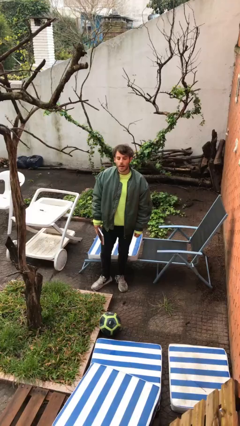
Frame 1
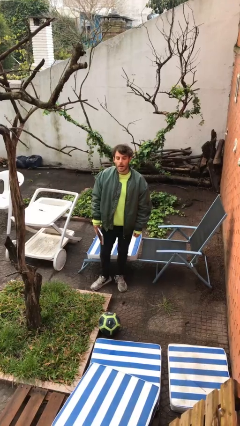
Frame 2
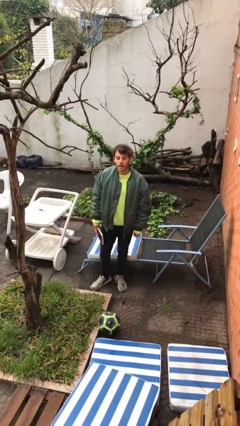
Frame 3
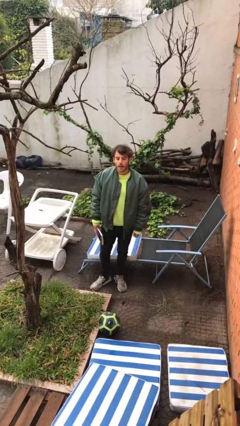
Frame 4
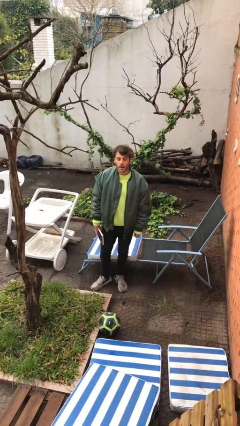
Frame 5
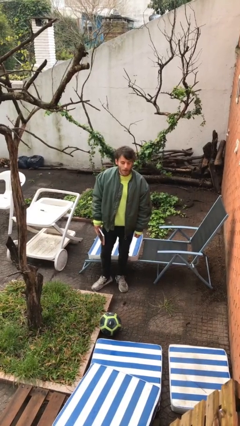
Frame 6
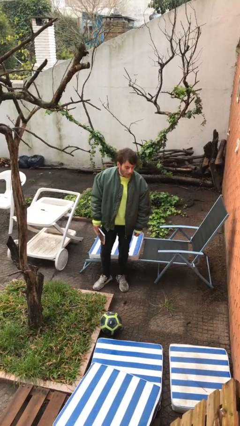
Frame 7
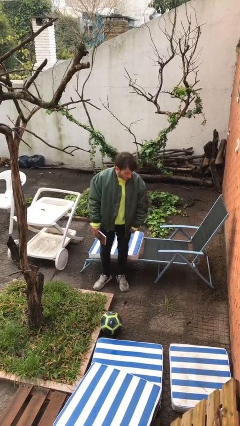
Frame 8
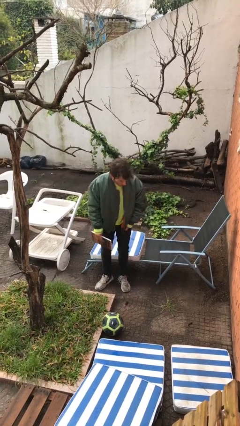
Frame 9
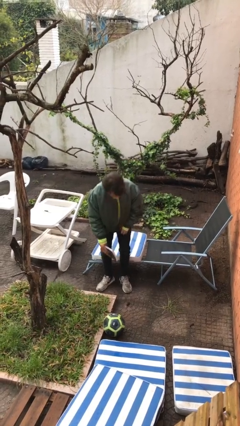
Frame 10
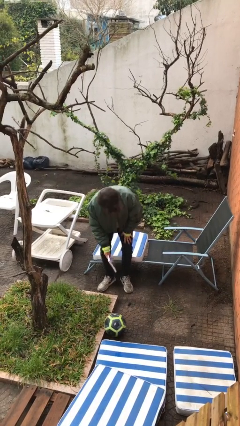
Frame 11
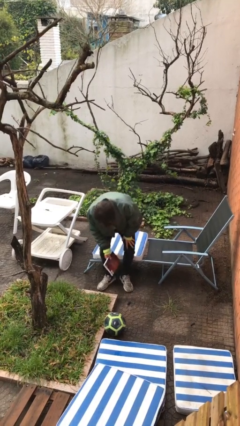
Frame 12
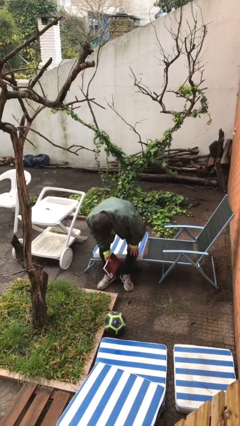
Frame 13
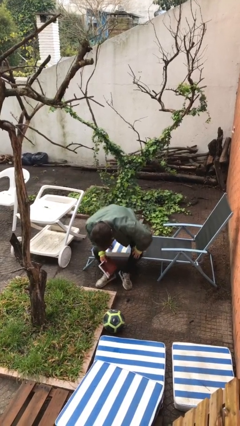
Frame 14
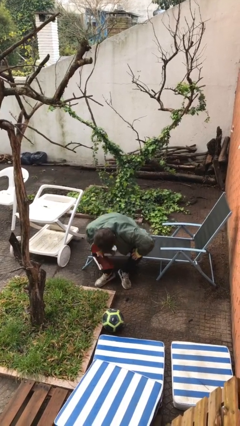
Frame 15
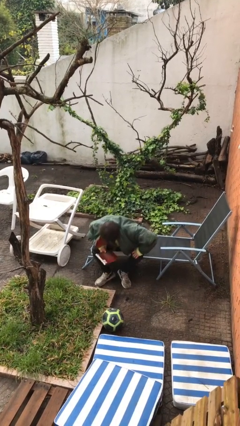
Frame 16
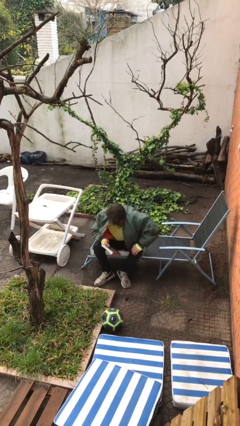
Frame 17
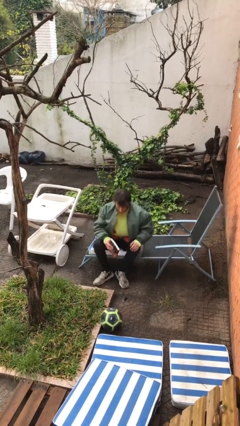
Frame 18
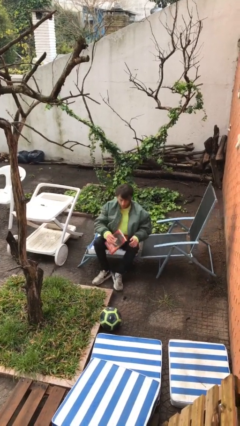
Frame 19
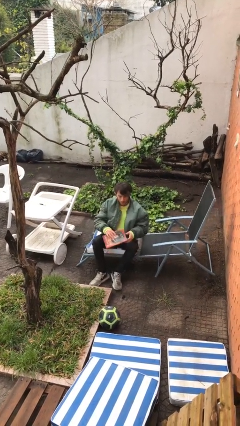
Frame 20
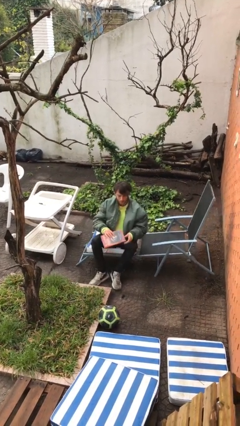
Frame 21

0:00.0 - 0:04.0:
person sits down

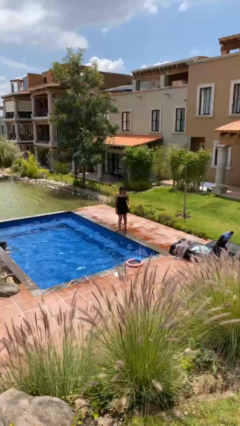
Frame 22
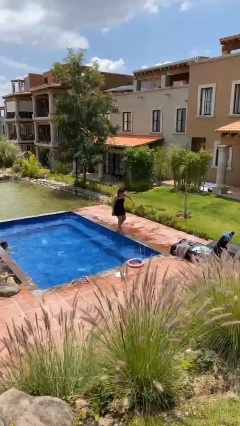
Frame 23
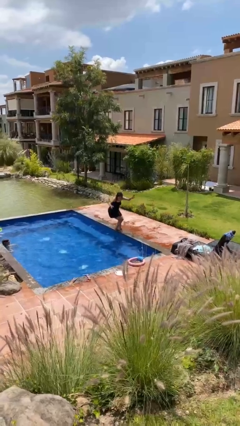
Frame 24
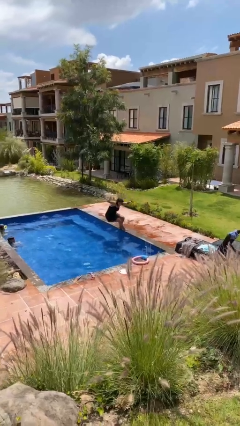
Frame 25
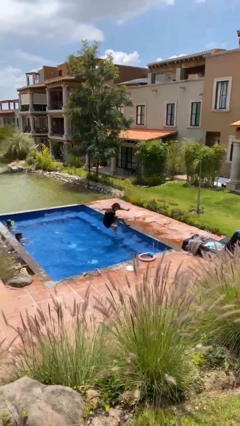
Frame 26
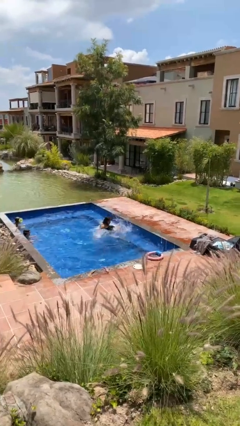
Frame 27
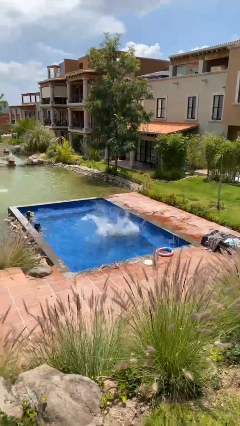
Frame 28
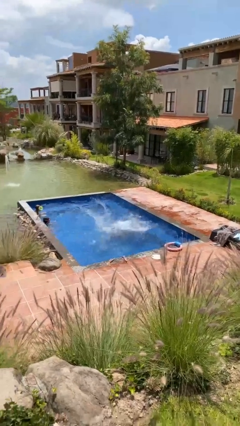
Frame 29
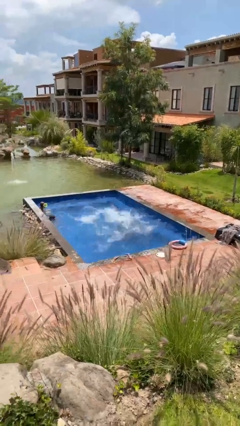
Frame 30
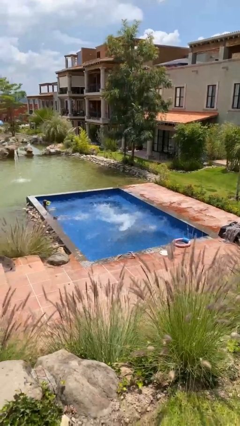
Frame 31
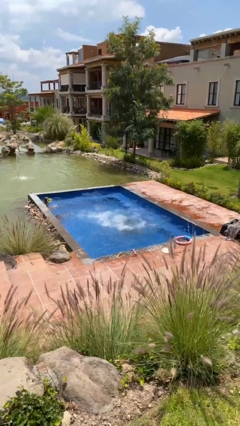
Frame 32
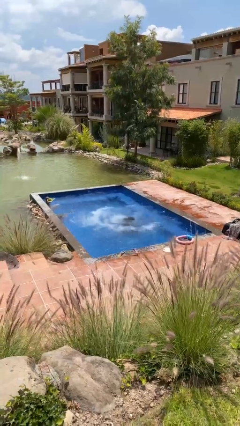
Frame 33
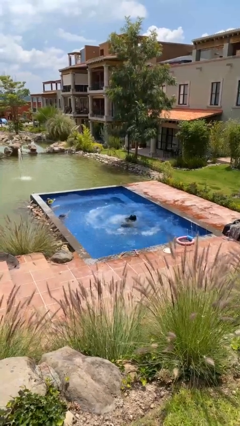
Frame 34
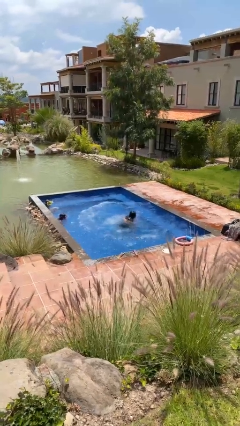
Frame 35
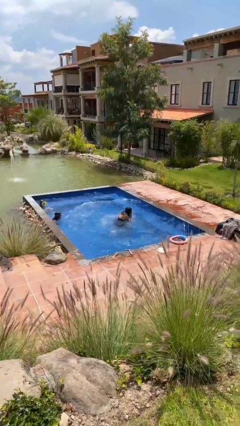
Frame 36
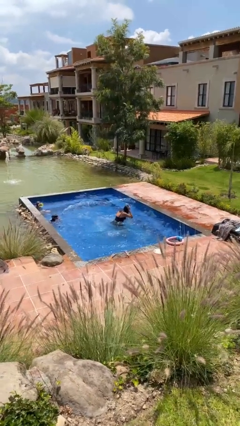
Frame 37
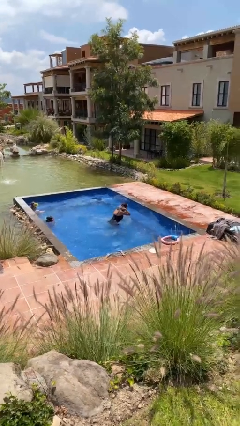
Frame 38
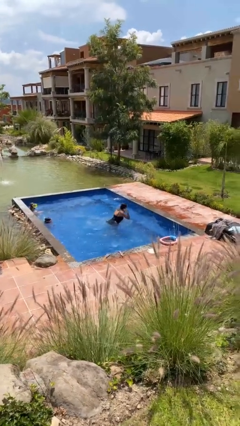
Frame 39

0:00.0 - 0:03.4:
person falls into pool

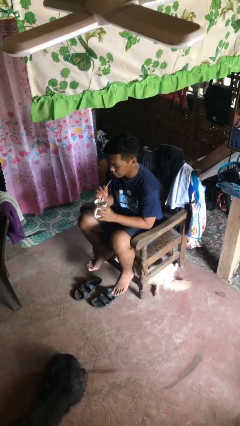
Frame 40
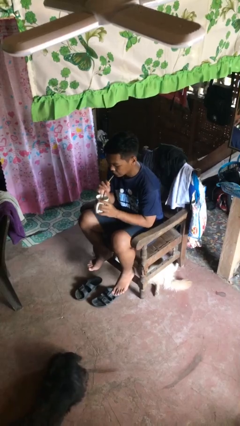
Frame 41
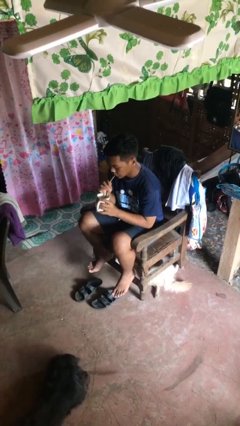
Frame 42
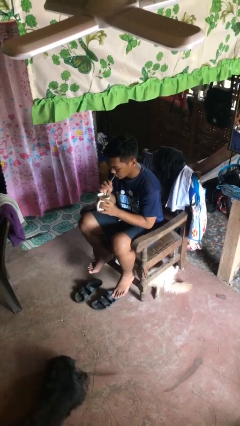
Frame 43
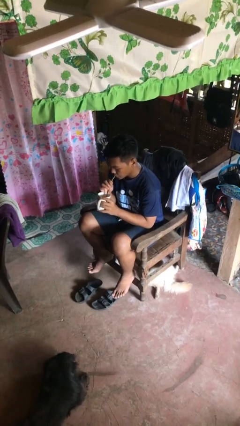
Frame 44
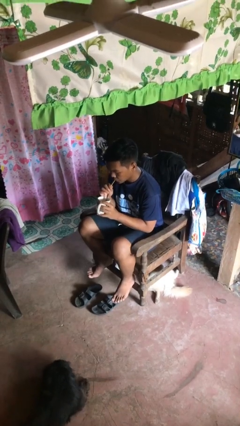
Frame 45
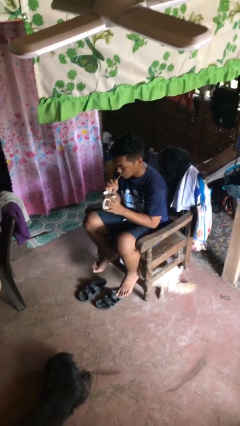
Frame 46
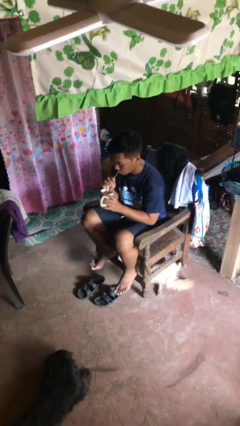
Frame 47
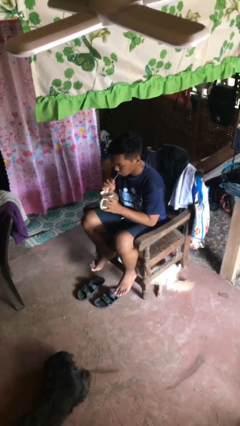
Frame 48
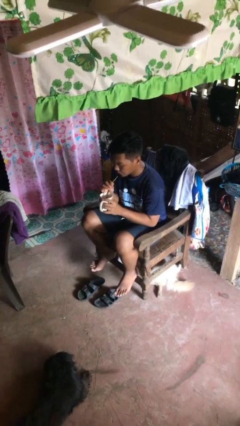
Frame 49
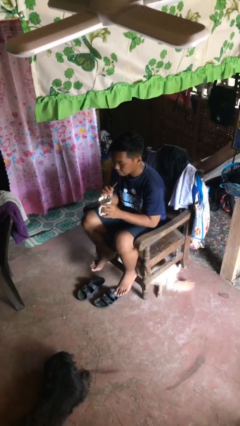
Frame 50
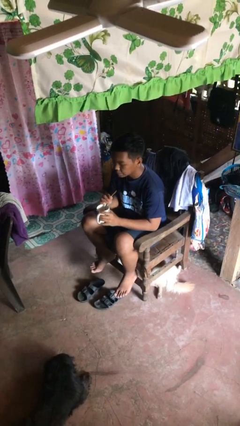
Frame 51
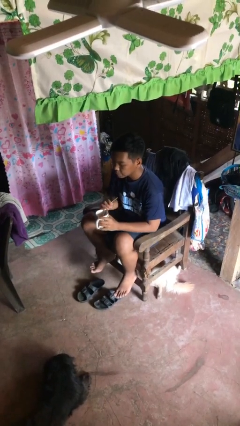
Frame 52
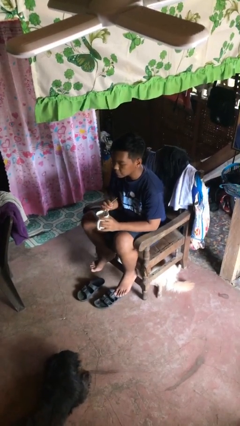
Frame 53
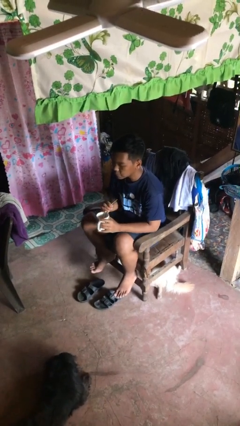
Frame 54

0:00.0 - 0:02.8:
person drinks from straw

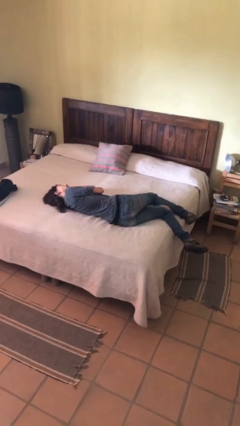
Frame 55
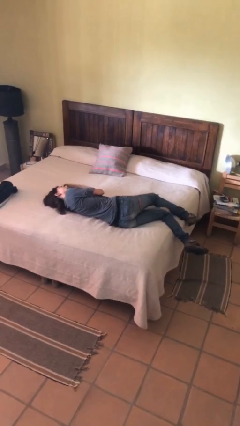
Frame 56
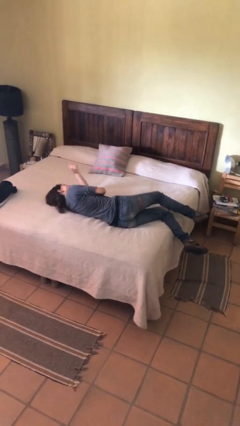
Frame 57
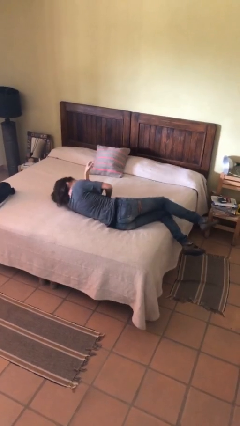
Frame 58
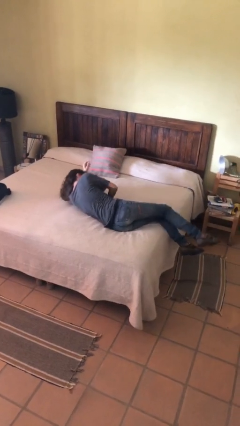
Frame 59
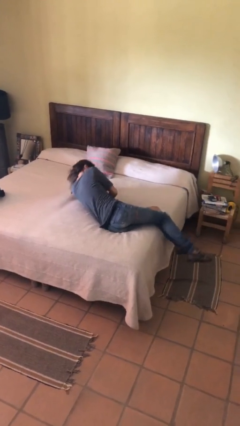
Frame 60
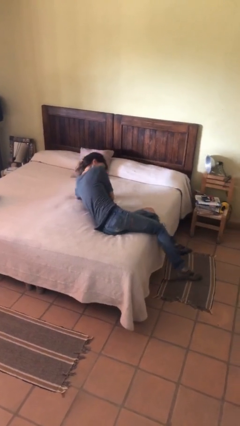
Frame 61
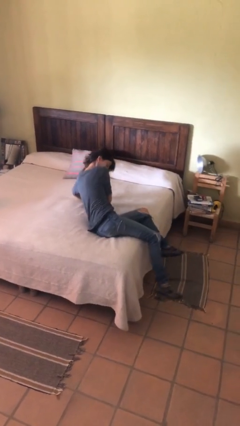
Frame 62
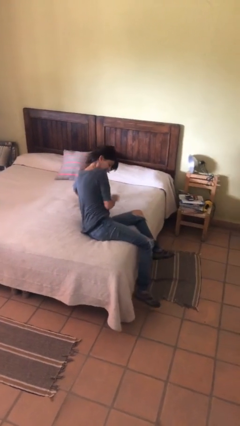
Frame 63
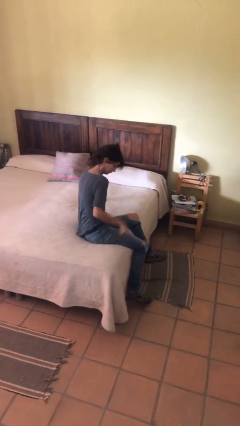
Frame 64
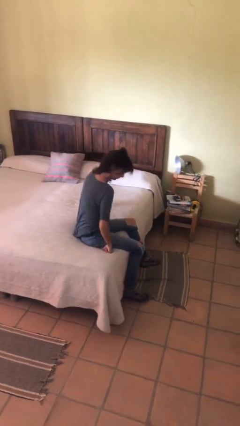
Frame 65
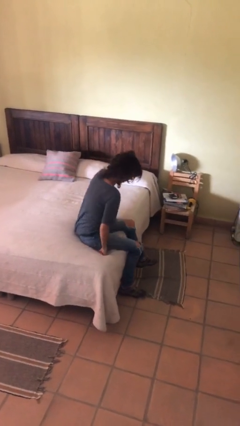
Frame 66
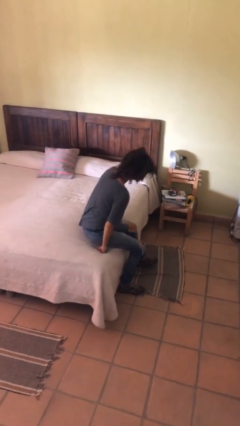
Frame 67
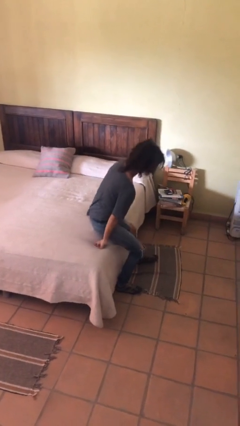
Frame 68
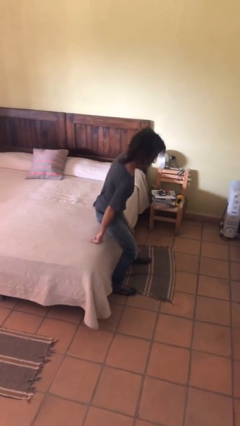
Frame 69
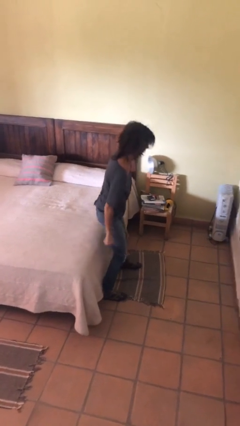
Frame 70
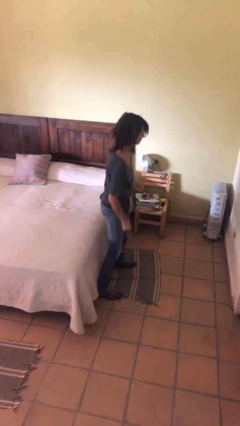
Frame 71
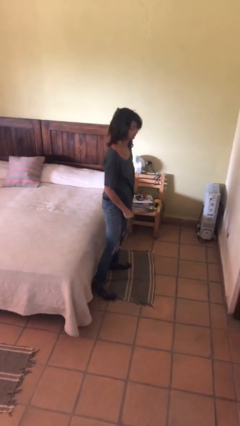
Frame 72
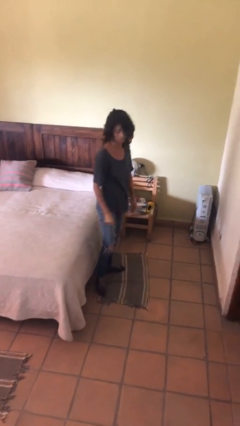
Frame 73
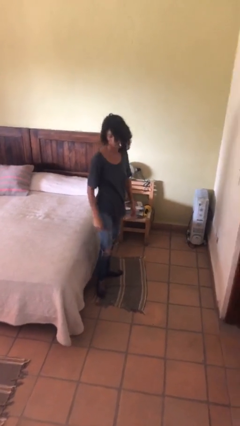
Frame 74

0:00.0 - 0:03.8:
person stands up

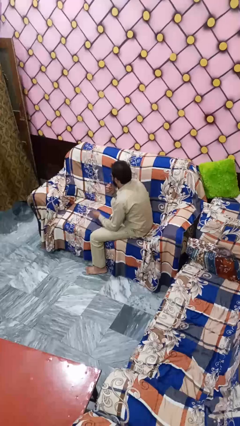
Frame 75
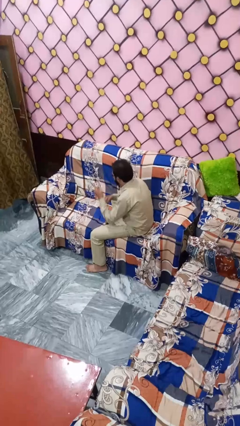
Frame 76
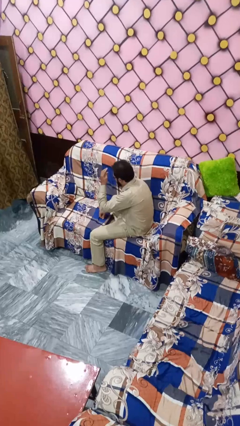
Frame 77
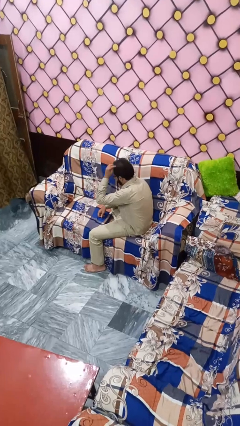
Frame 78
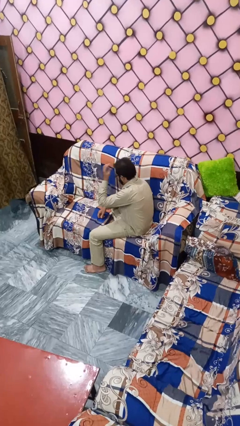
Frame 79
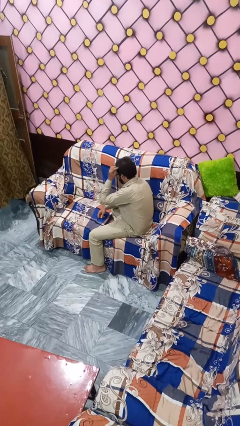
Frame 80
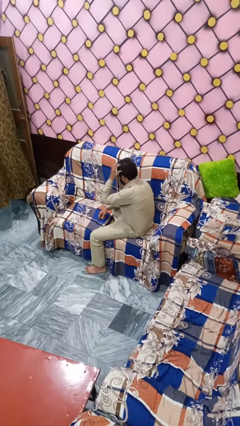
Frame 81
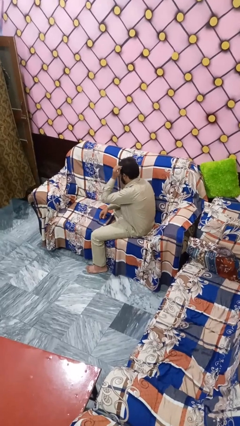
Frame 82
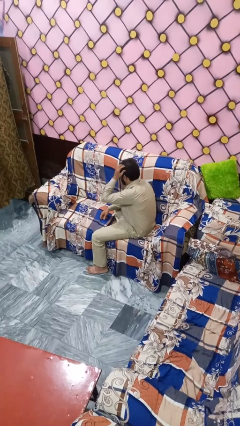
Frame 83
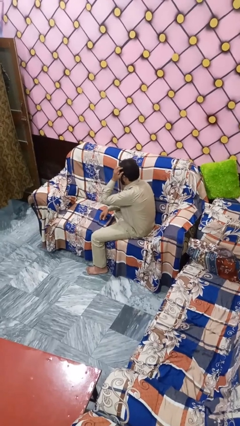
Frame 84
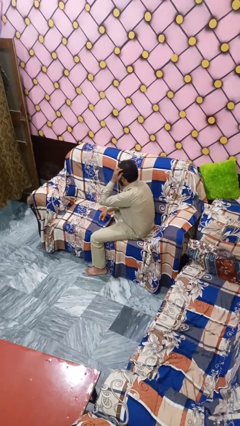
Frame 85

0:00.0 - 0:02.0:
person strokes hair

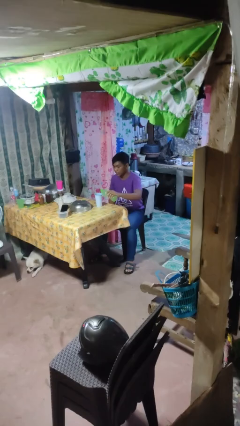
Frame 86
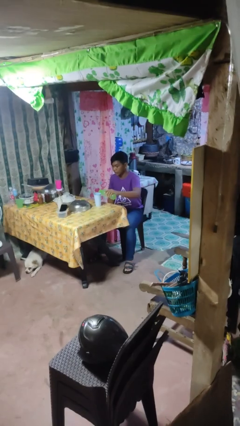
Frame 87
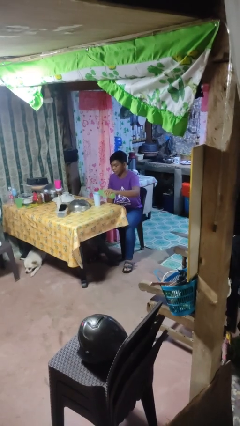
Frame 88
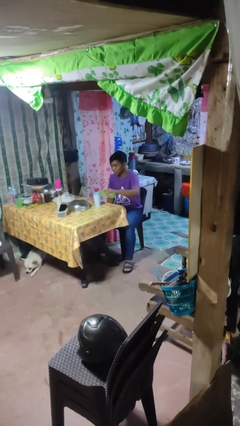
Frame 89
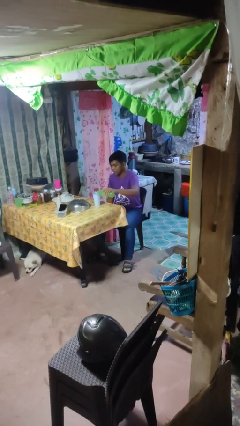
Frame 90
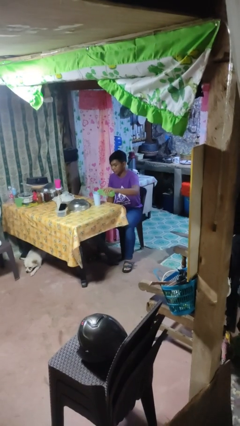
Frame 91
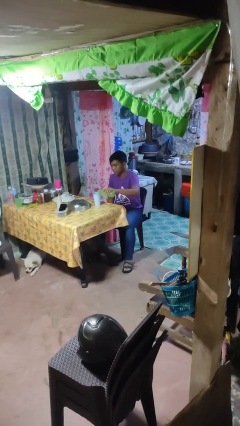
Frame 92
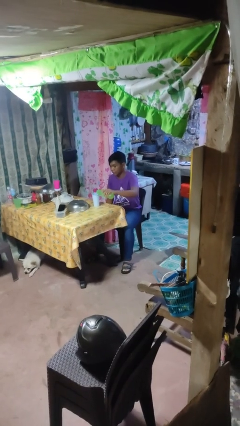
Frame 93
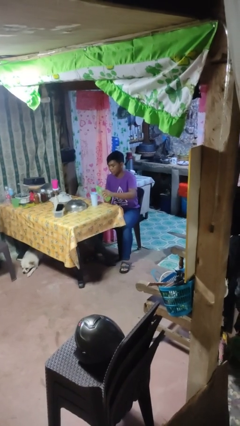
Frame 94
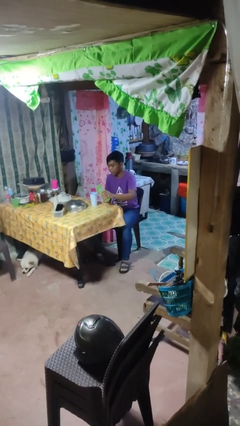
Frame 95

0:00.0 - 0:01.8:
person pours liquid into cup
